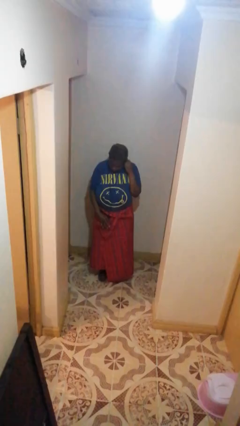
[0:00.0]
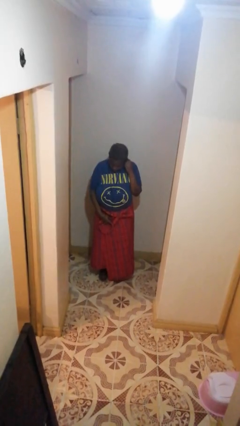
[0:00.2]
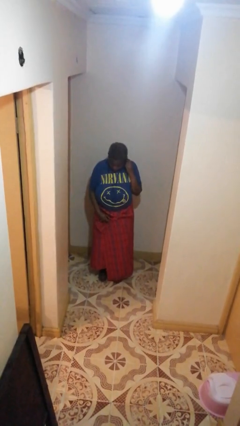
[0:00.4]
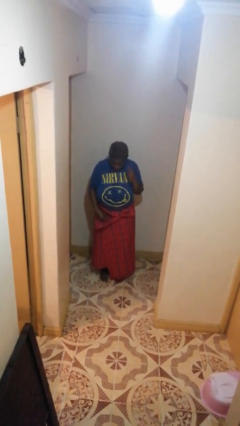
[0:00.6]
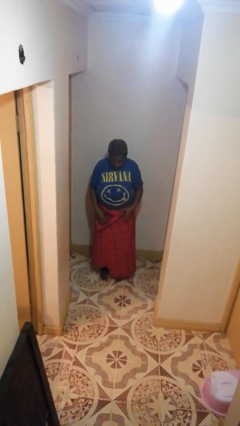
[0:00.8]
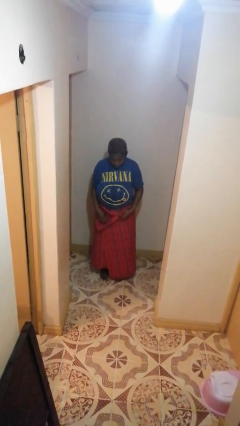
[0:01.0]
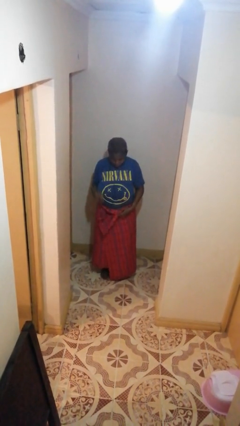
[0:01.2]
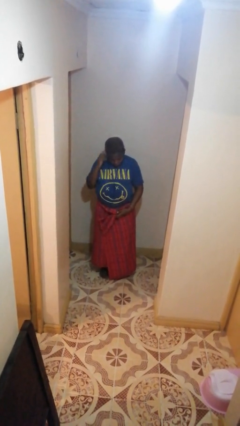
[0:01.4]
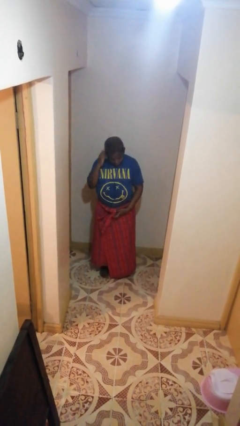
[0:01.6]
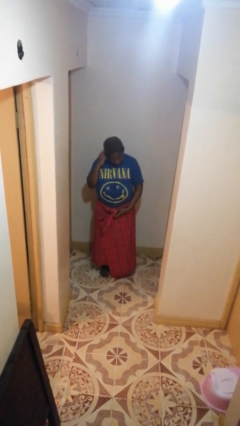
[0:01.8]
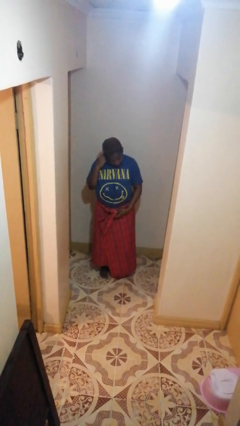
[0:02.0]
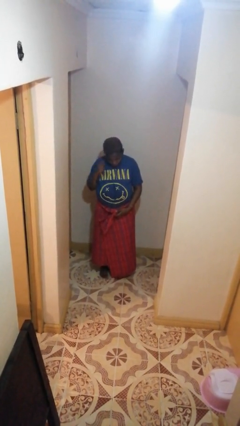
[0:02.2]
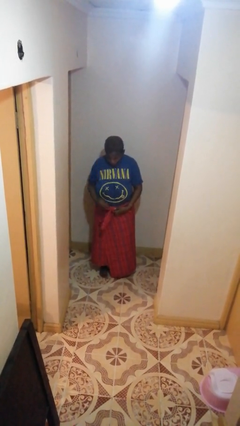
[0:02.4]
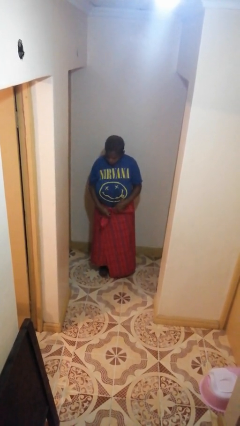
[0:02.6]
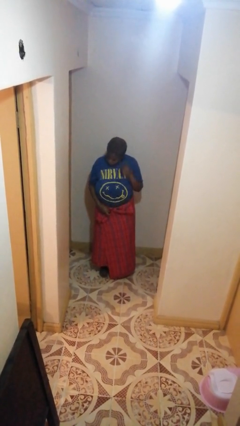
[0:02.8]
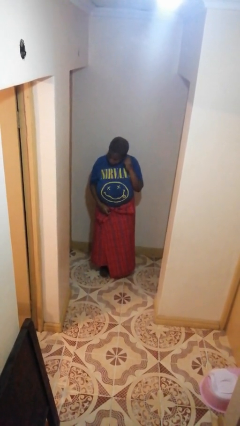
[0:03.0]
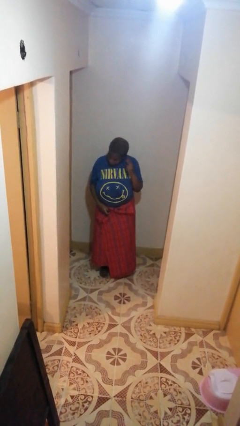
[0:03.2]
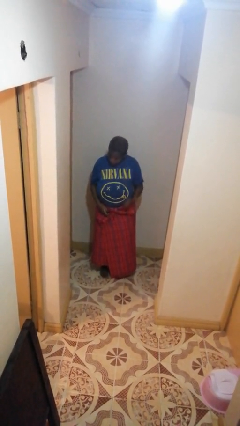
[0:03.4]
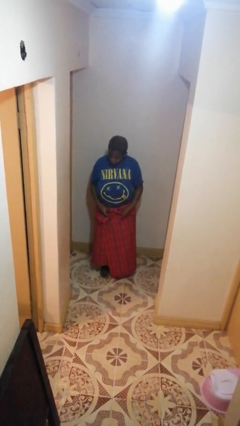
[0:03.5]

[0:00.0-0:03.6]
person takes off headphones

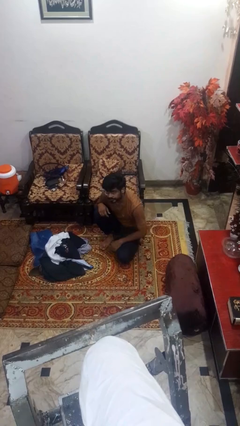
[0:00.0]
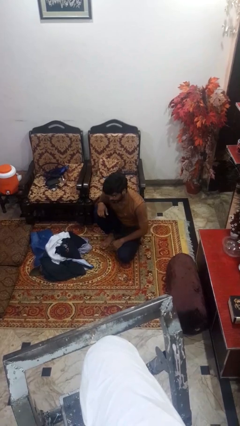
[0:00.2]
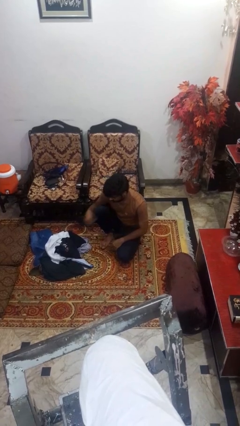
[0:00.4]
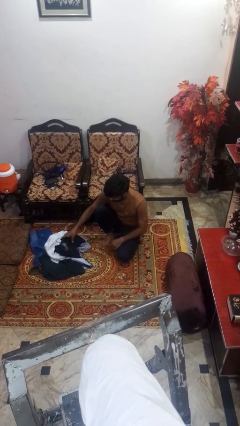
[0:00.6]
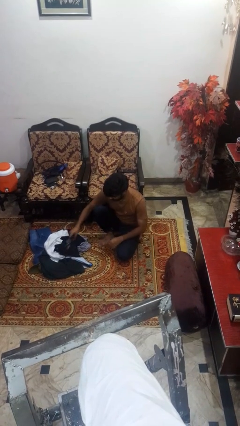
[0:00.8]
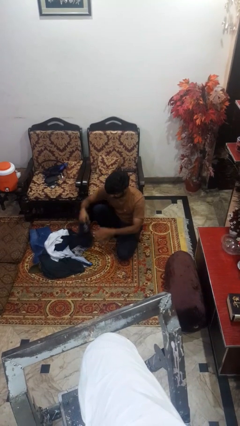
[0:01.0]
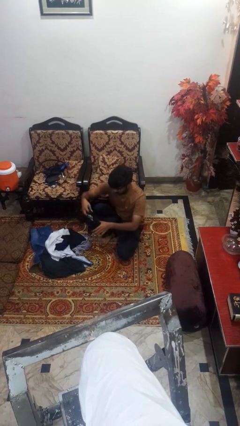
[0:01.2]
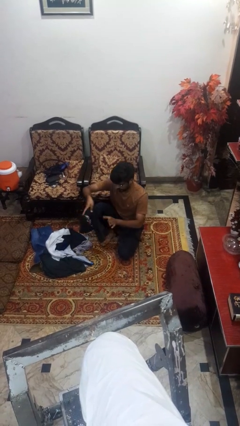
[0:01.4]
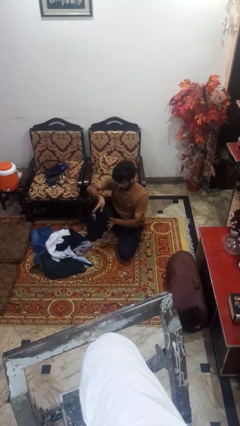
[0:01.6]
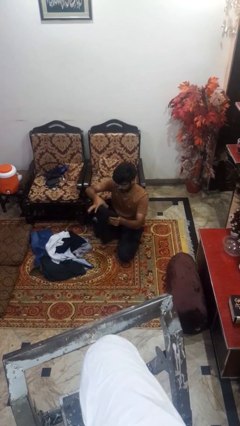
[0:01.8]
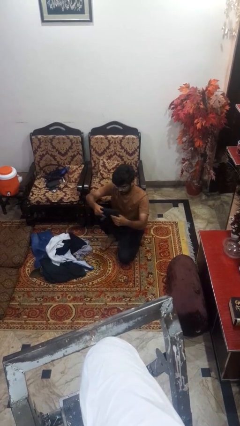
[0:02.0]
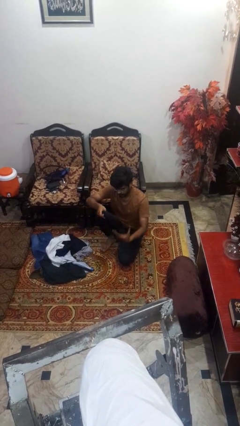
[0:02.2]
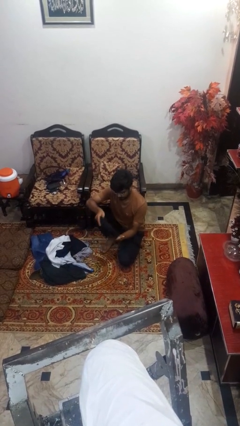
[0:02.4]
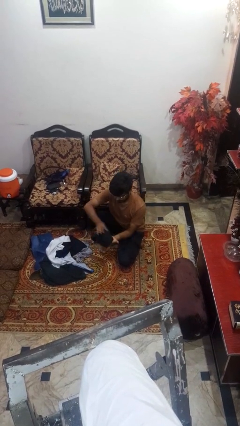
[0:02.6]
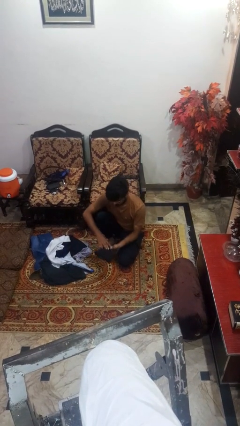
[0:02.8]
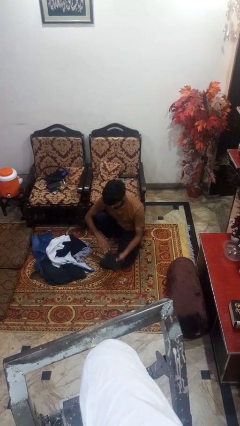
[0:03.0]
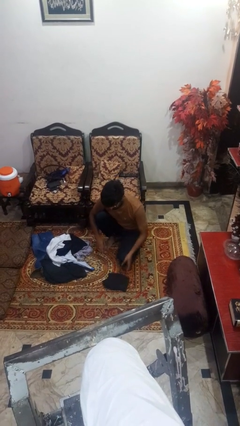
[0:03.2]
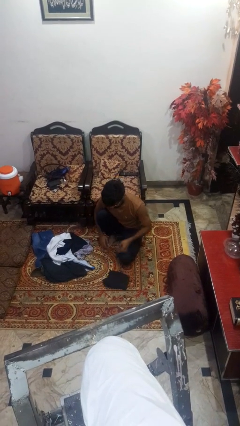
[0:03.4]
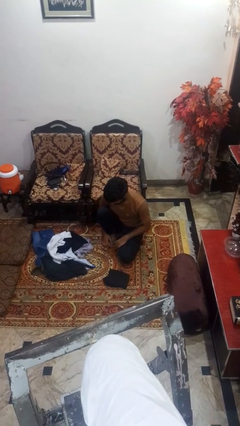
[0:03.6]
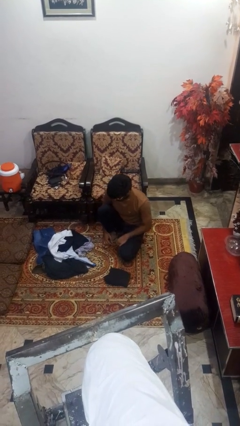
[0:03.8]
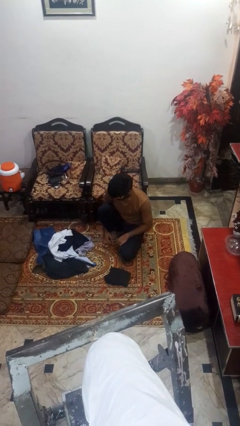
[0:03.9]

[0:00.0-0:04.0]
person folds shirt

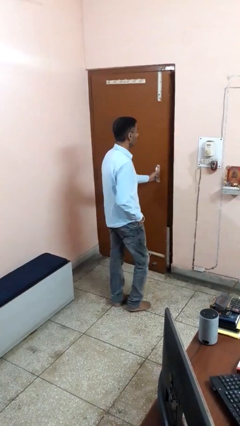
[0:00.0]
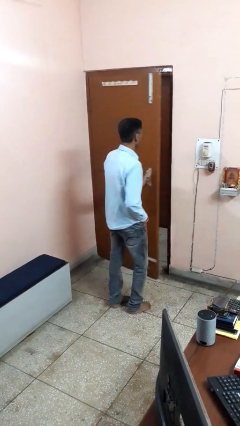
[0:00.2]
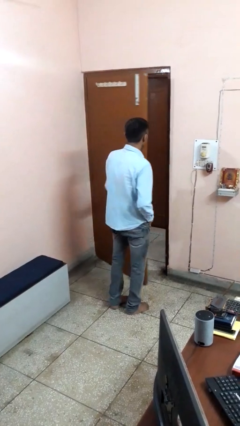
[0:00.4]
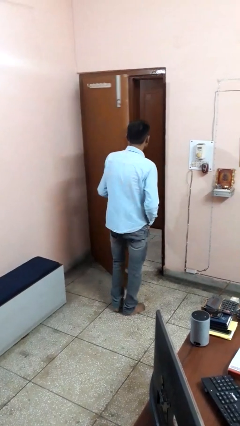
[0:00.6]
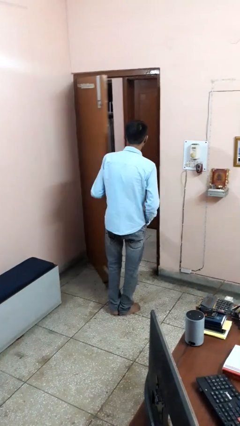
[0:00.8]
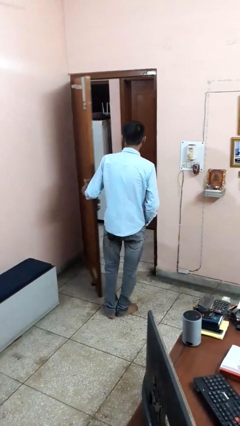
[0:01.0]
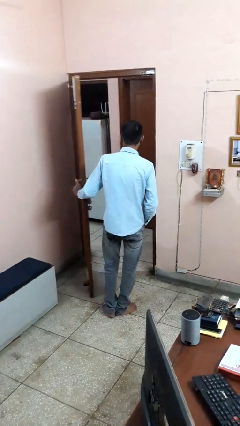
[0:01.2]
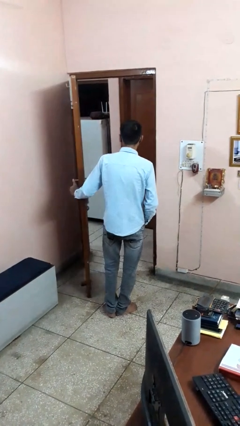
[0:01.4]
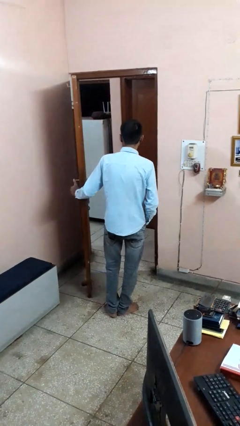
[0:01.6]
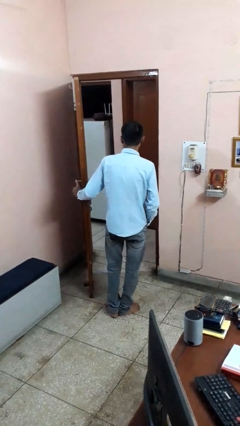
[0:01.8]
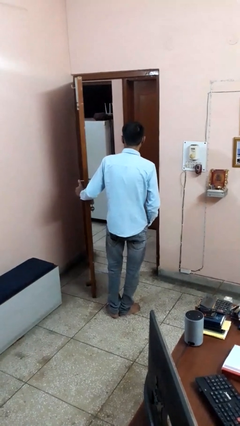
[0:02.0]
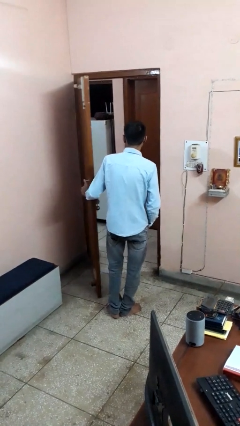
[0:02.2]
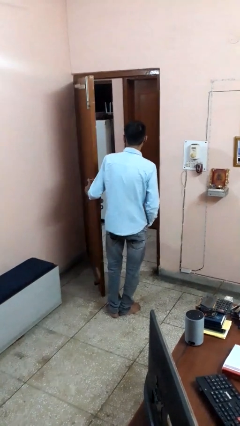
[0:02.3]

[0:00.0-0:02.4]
person opens facility door

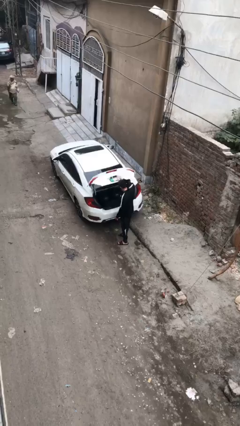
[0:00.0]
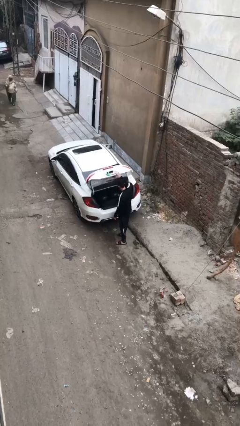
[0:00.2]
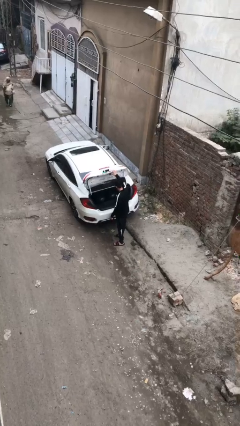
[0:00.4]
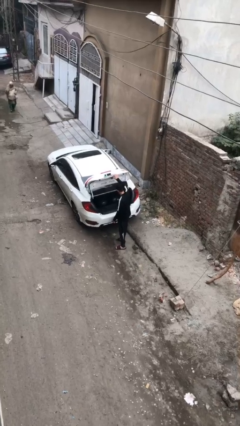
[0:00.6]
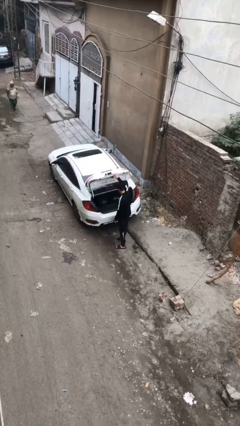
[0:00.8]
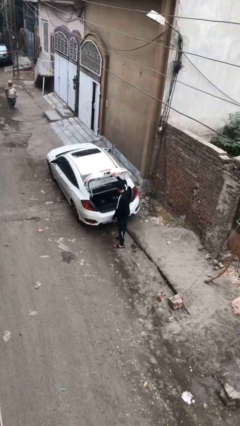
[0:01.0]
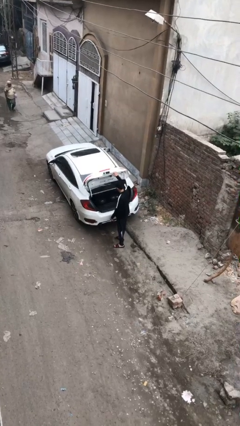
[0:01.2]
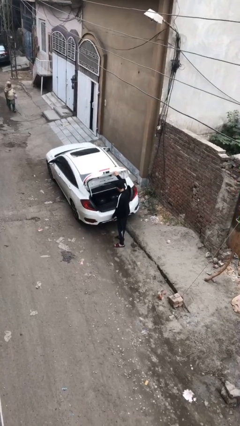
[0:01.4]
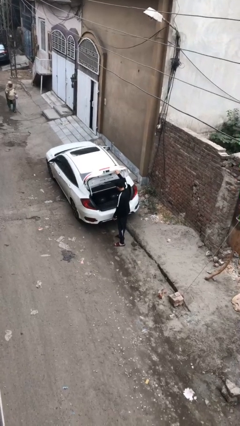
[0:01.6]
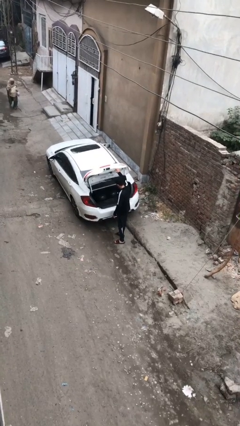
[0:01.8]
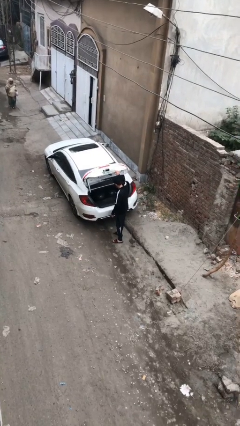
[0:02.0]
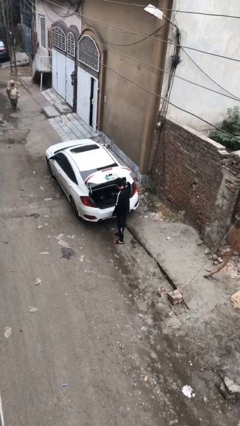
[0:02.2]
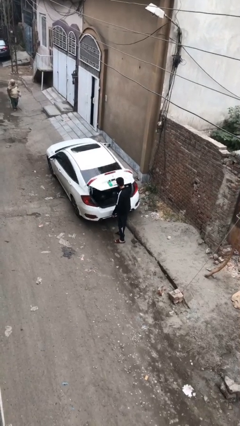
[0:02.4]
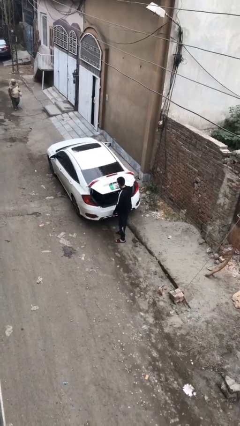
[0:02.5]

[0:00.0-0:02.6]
person opens car trunk

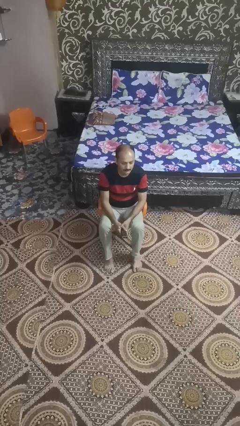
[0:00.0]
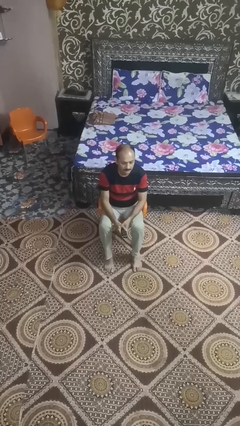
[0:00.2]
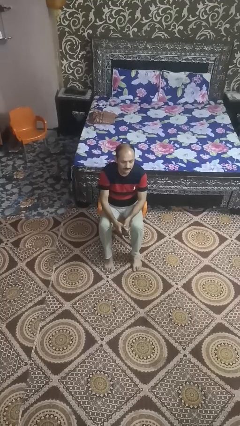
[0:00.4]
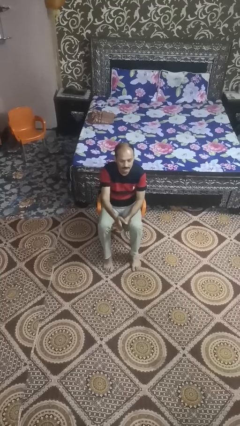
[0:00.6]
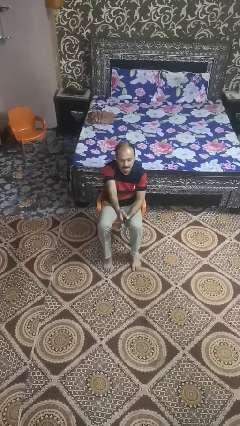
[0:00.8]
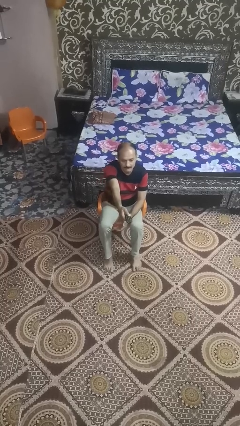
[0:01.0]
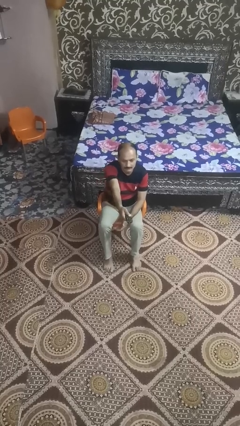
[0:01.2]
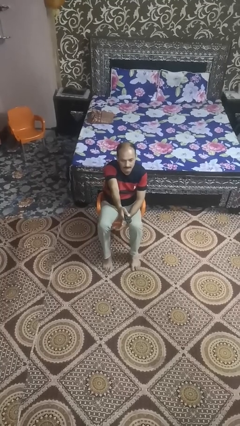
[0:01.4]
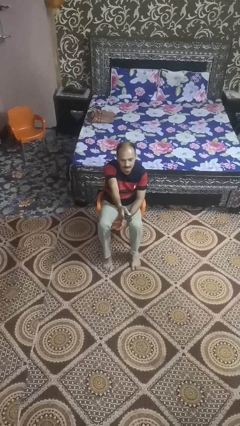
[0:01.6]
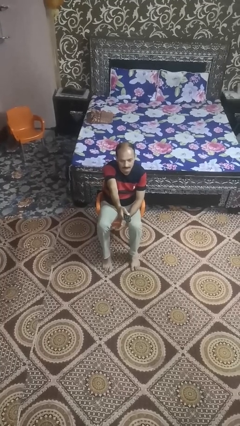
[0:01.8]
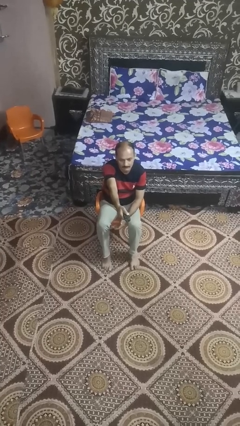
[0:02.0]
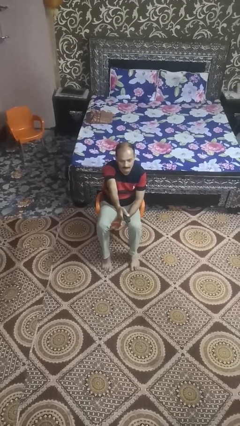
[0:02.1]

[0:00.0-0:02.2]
person uses television remote

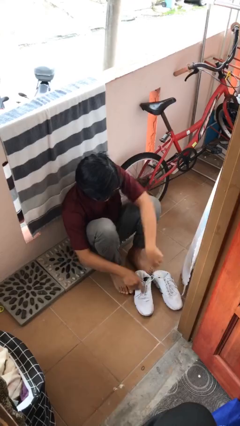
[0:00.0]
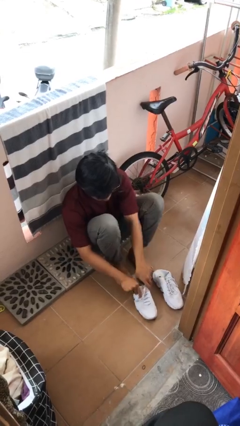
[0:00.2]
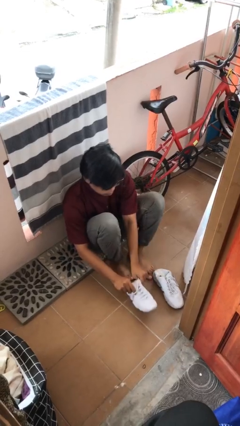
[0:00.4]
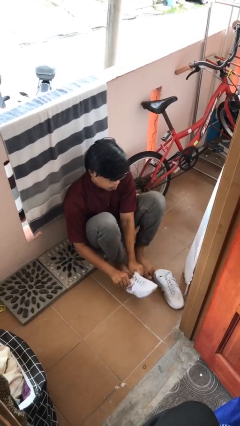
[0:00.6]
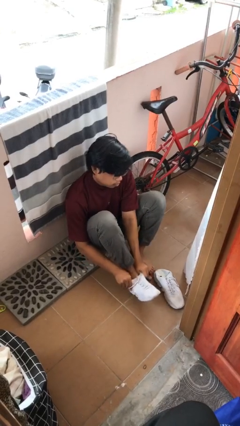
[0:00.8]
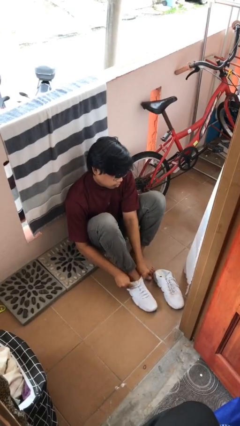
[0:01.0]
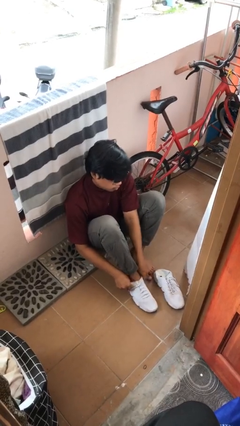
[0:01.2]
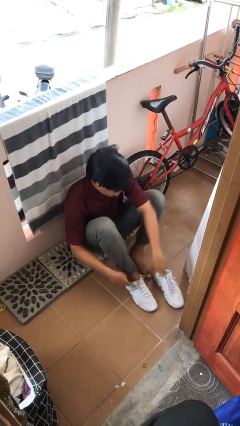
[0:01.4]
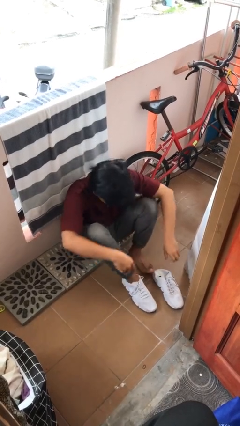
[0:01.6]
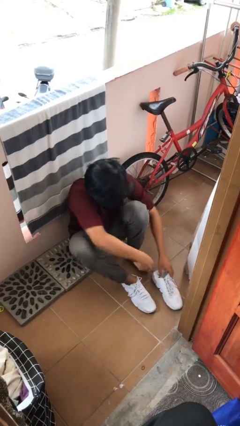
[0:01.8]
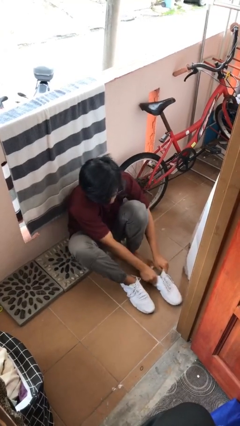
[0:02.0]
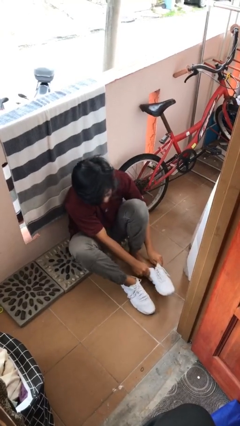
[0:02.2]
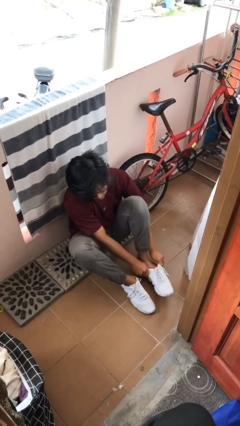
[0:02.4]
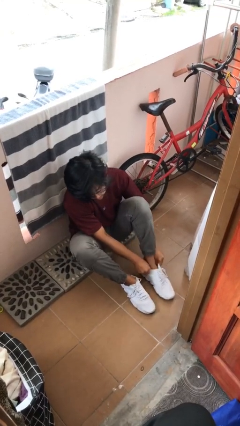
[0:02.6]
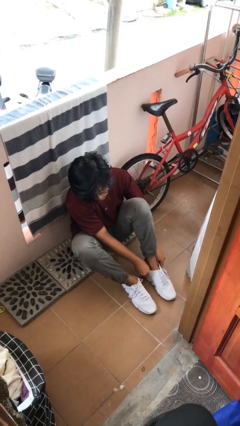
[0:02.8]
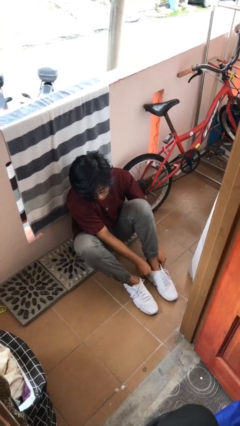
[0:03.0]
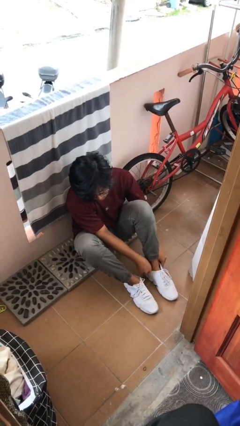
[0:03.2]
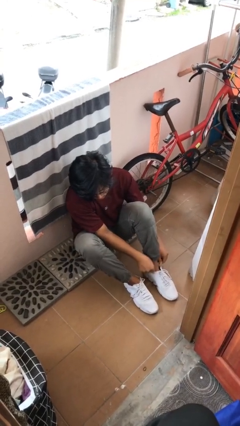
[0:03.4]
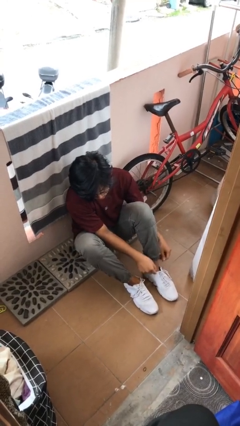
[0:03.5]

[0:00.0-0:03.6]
person puts on shoes
